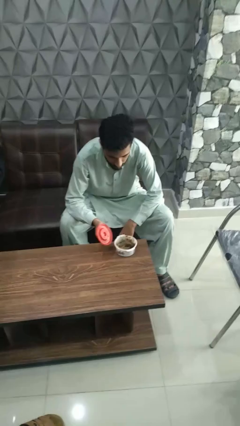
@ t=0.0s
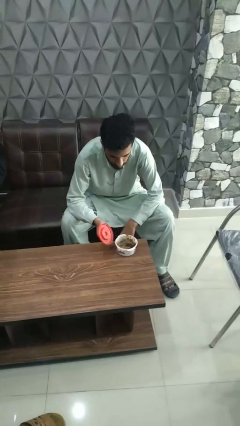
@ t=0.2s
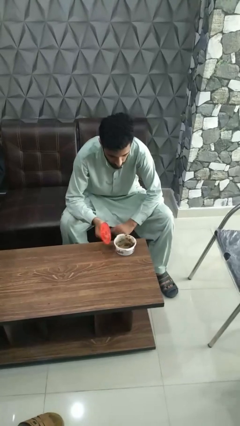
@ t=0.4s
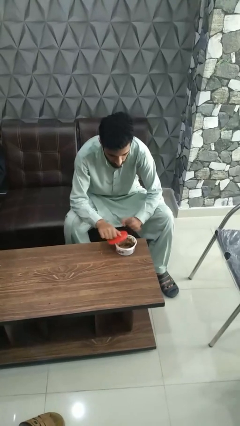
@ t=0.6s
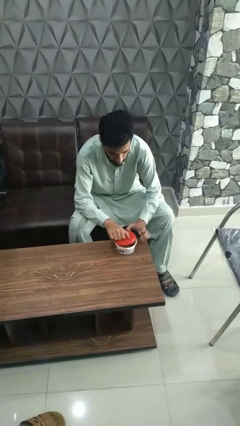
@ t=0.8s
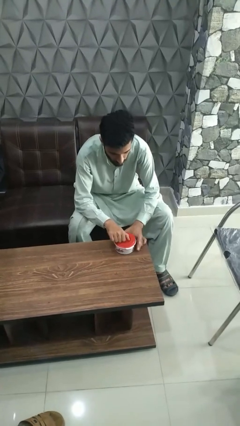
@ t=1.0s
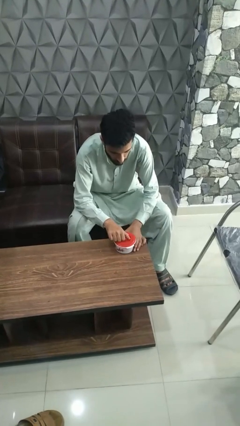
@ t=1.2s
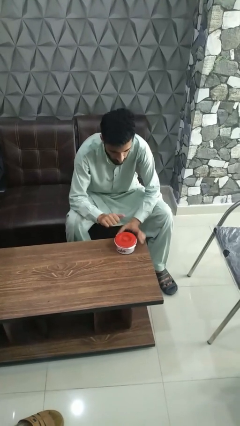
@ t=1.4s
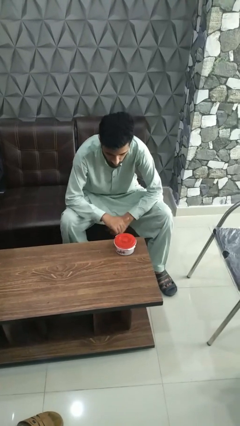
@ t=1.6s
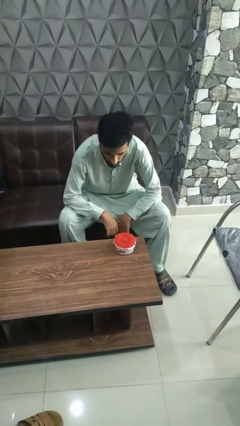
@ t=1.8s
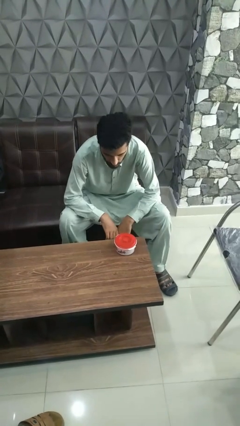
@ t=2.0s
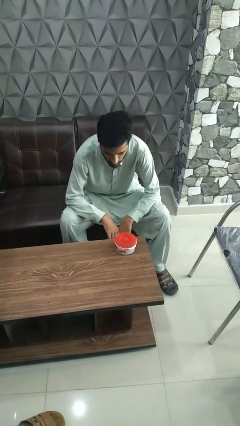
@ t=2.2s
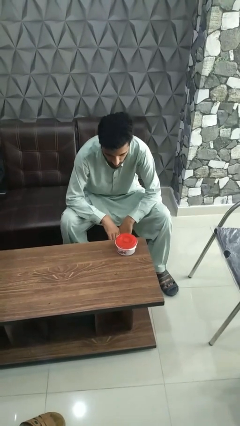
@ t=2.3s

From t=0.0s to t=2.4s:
person closes jar

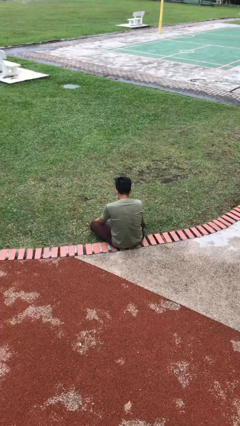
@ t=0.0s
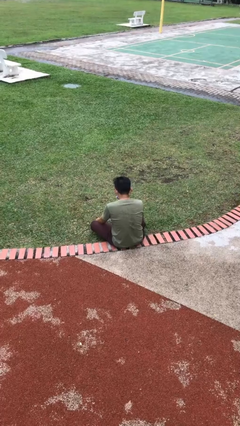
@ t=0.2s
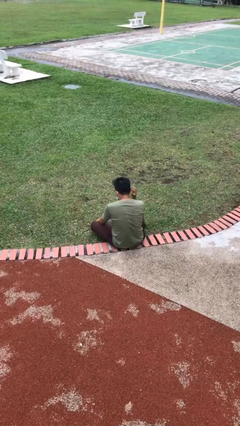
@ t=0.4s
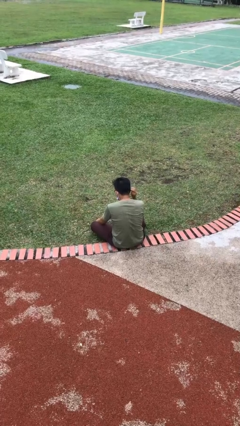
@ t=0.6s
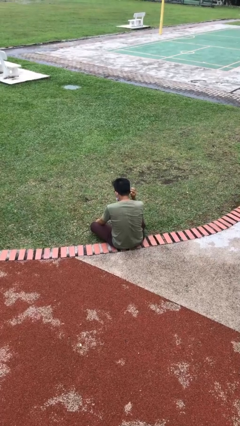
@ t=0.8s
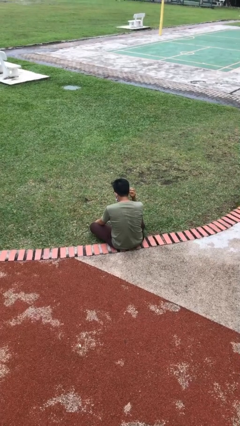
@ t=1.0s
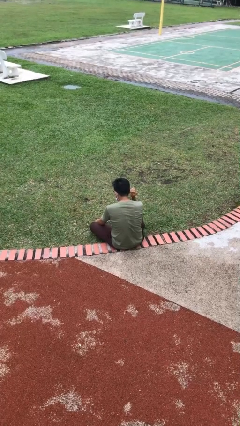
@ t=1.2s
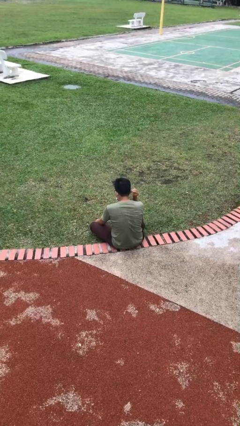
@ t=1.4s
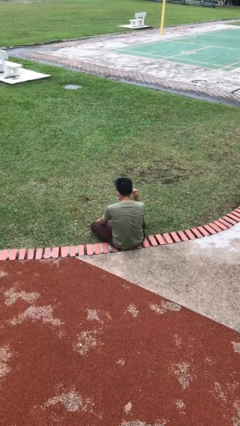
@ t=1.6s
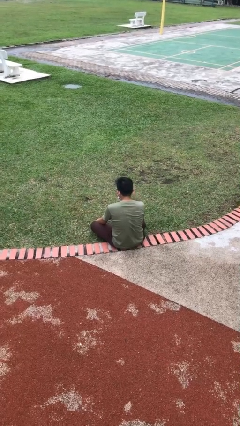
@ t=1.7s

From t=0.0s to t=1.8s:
person touches earlobe

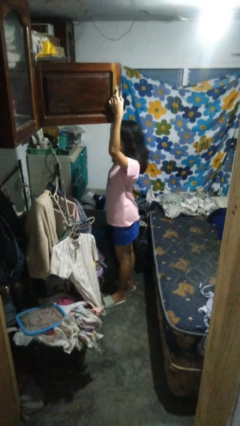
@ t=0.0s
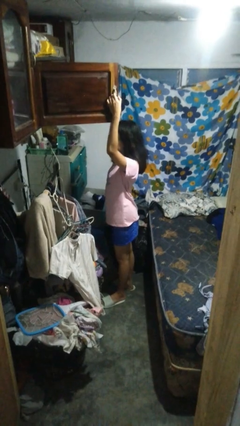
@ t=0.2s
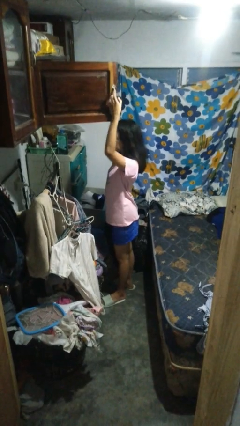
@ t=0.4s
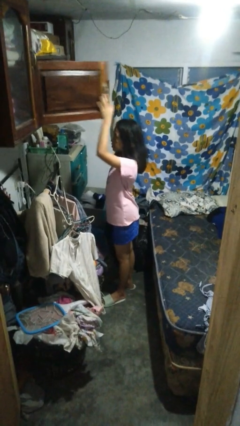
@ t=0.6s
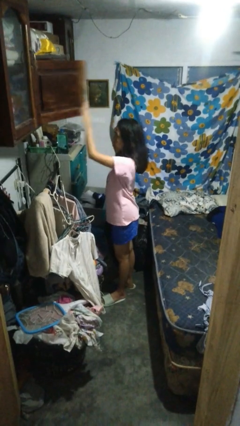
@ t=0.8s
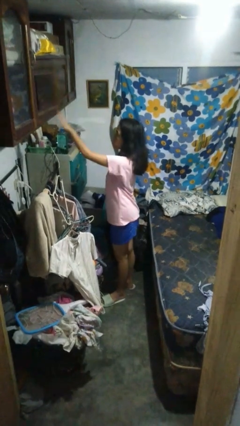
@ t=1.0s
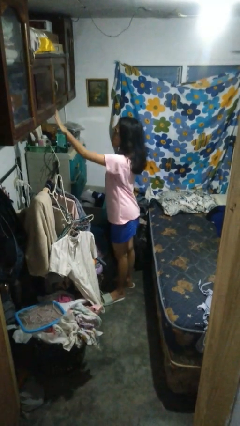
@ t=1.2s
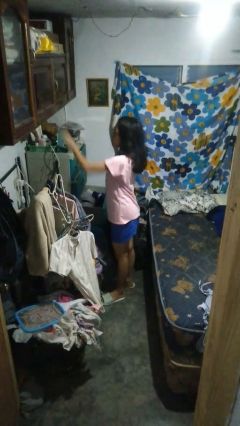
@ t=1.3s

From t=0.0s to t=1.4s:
person closes closet door

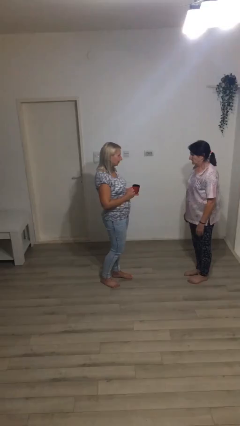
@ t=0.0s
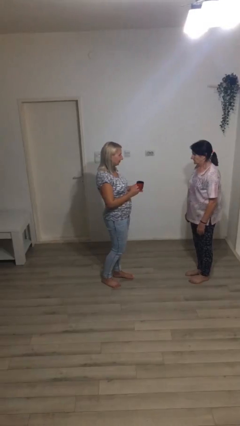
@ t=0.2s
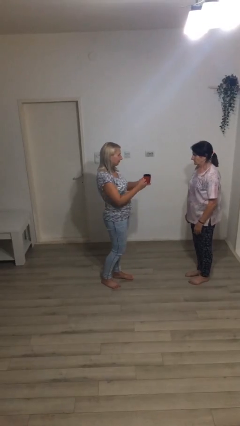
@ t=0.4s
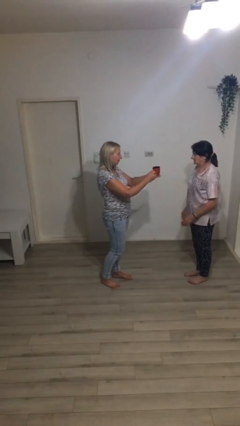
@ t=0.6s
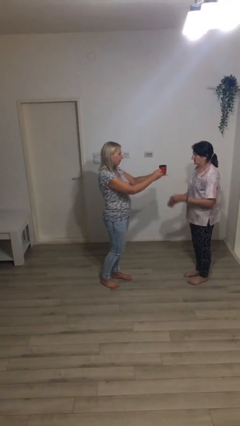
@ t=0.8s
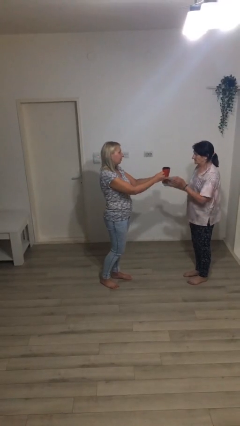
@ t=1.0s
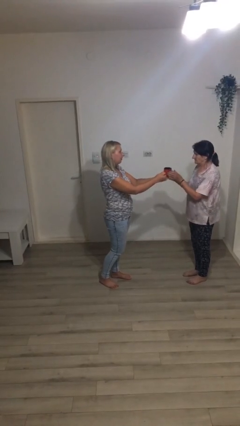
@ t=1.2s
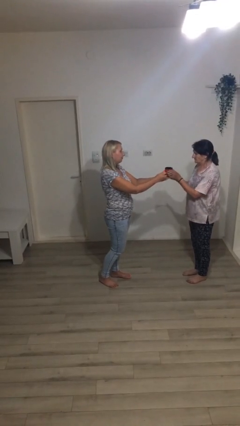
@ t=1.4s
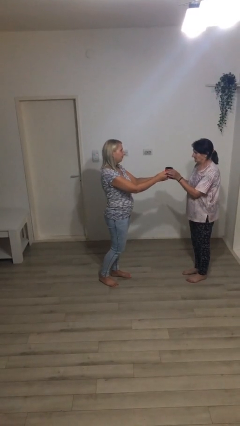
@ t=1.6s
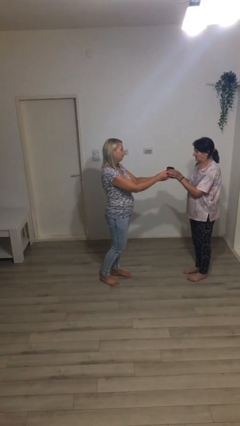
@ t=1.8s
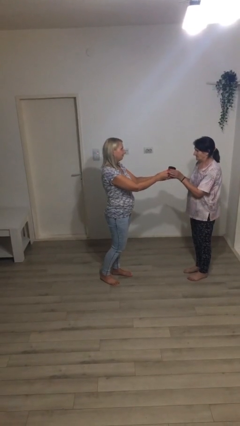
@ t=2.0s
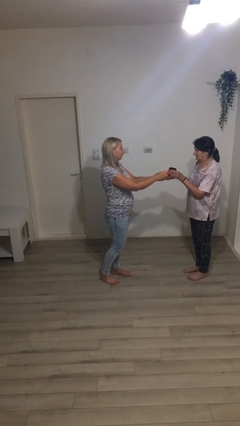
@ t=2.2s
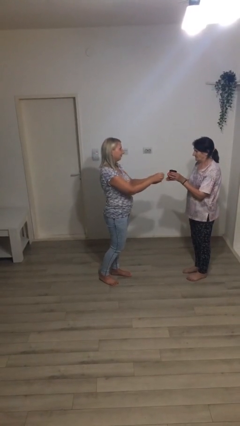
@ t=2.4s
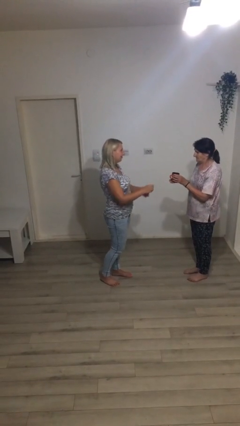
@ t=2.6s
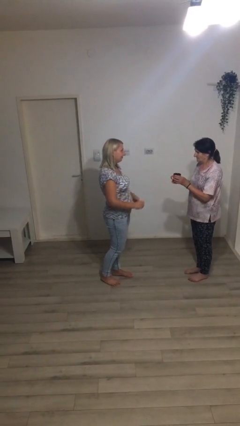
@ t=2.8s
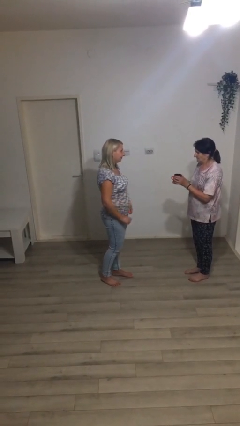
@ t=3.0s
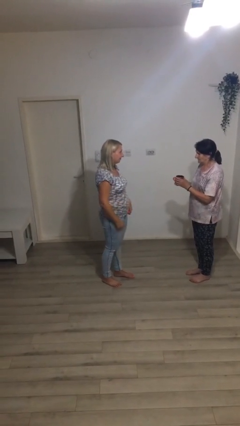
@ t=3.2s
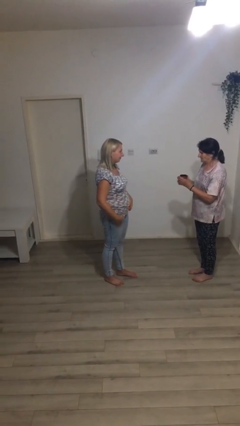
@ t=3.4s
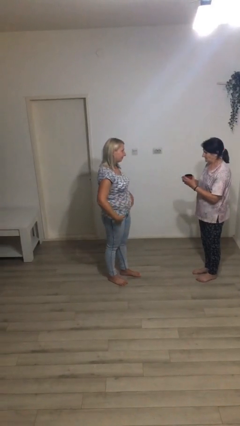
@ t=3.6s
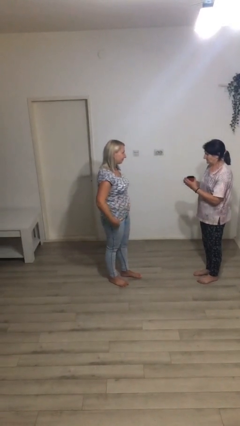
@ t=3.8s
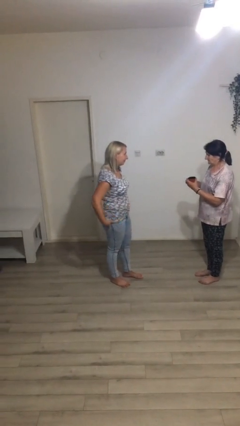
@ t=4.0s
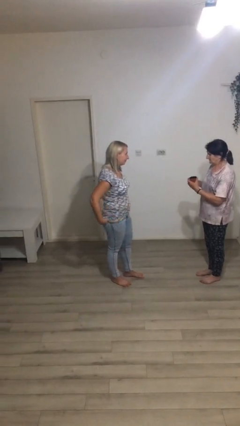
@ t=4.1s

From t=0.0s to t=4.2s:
person transfers object to person

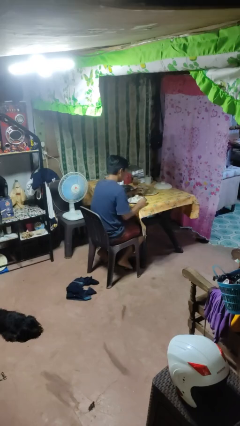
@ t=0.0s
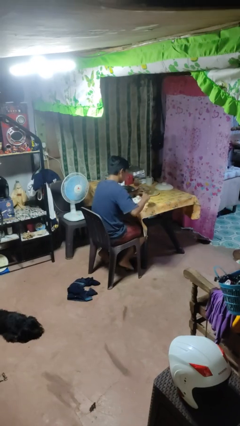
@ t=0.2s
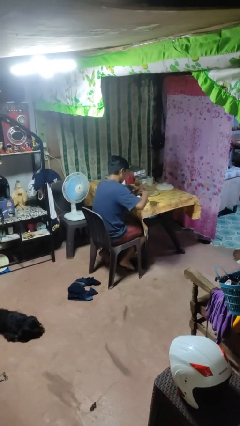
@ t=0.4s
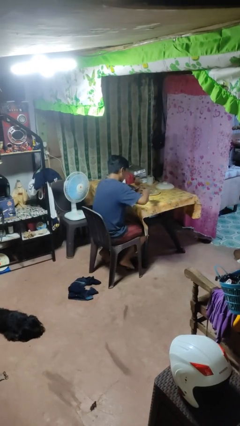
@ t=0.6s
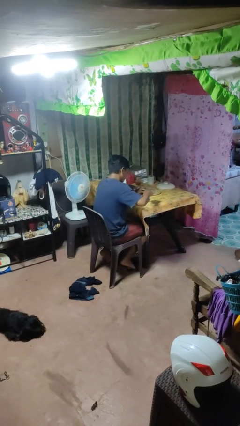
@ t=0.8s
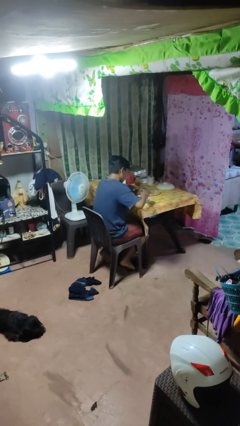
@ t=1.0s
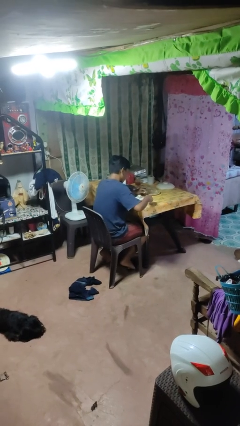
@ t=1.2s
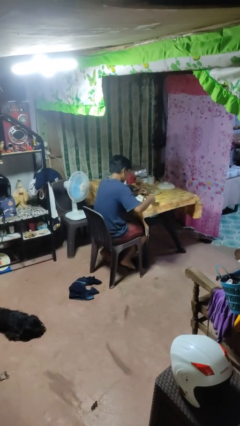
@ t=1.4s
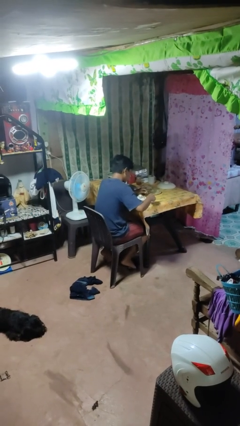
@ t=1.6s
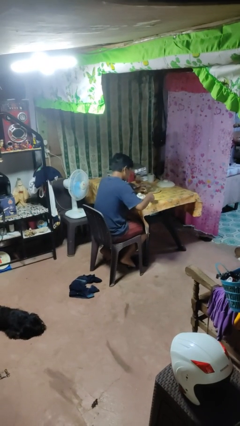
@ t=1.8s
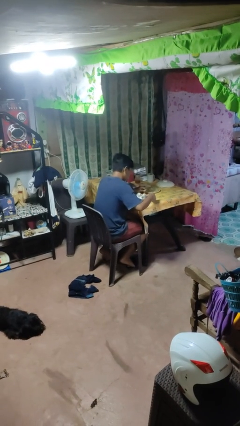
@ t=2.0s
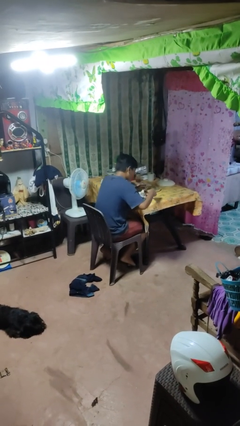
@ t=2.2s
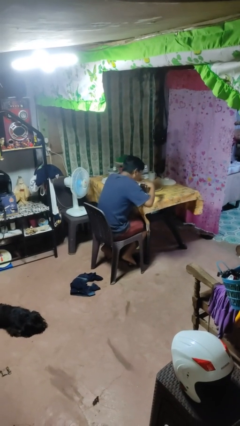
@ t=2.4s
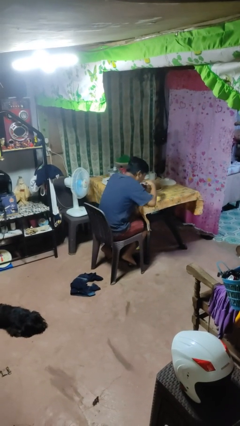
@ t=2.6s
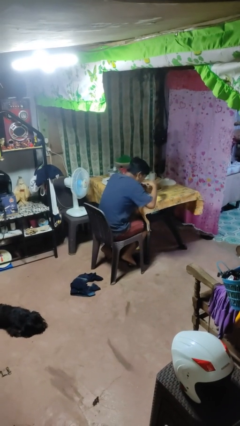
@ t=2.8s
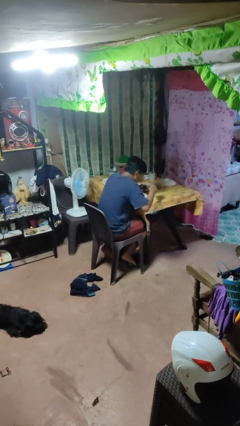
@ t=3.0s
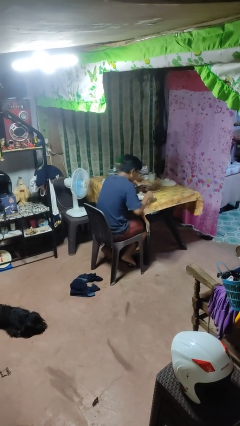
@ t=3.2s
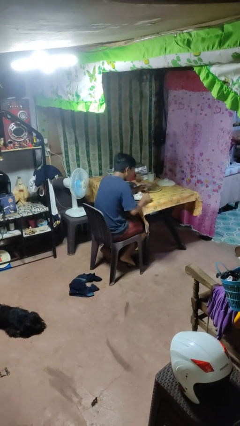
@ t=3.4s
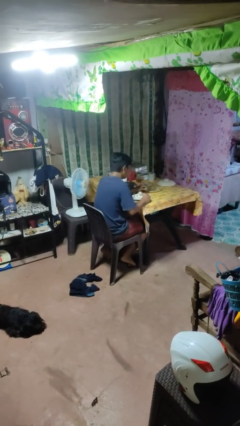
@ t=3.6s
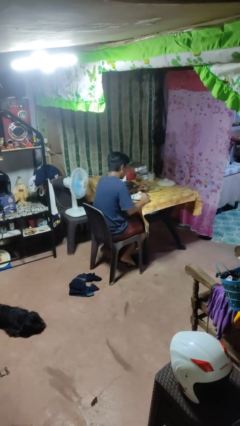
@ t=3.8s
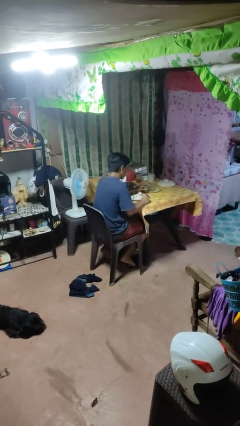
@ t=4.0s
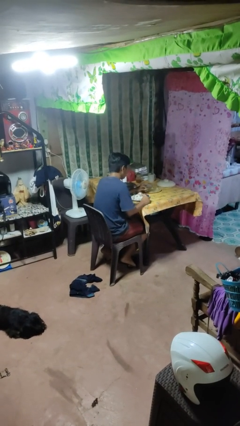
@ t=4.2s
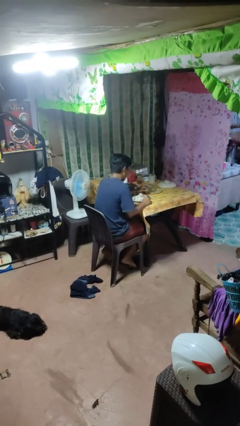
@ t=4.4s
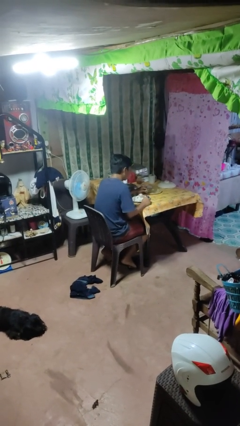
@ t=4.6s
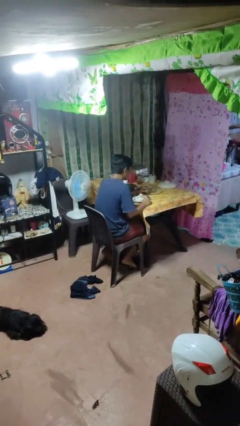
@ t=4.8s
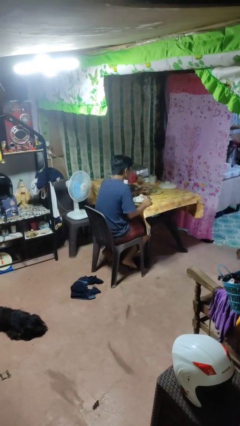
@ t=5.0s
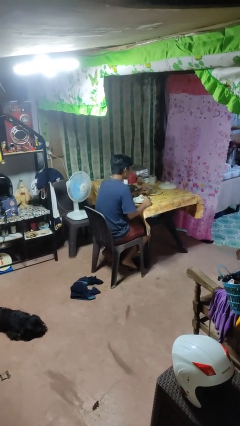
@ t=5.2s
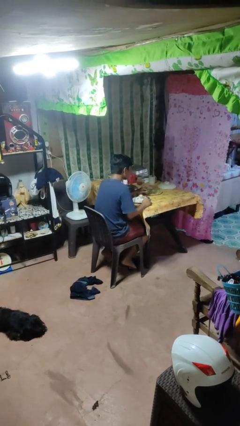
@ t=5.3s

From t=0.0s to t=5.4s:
person eats with utensil

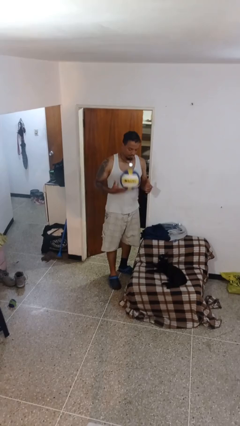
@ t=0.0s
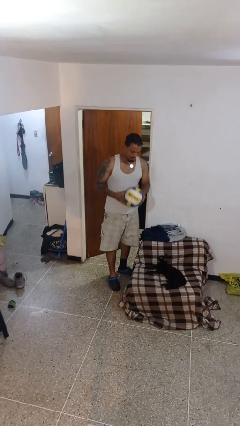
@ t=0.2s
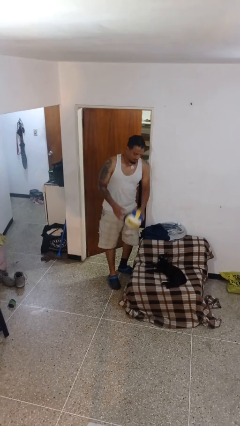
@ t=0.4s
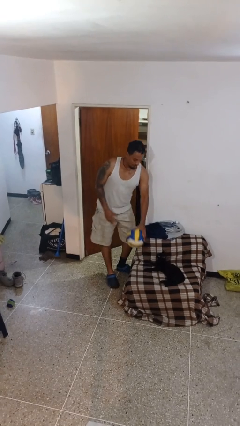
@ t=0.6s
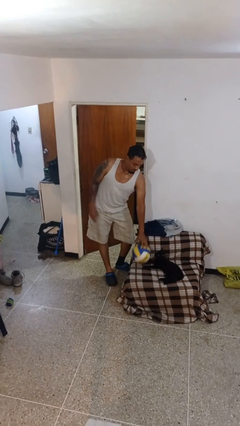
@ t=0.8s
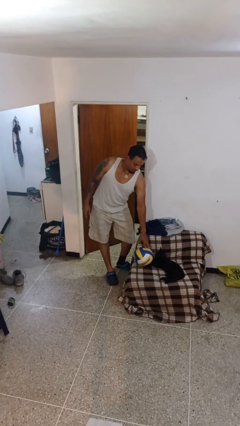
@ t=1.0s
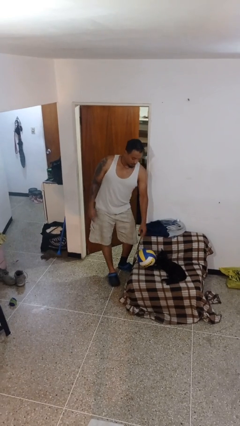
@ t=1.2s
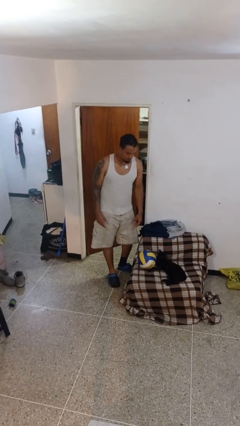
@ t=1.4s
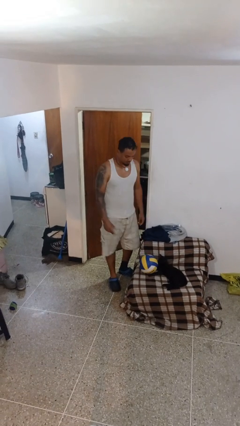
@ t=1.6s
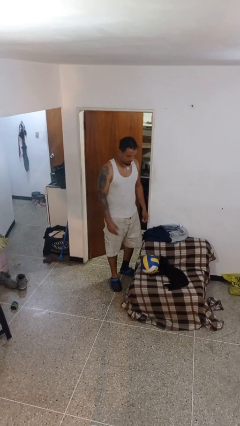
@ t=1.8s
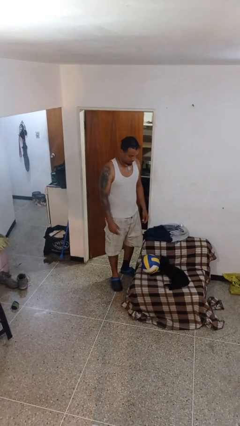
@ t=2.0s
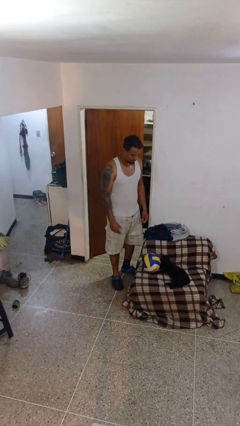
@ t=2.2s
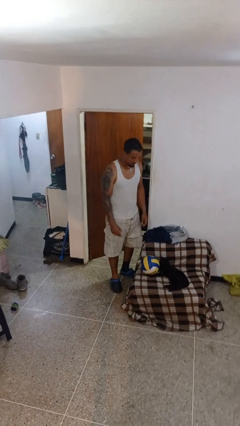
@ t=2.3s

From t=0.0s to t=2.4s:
person puts down object on couch
